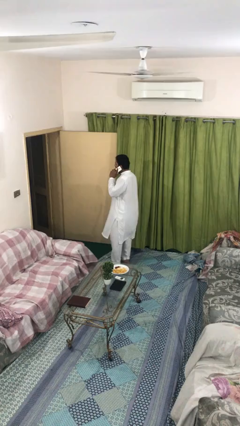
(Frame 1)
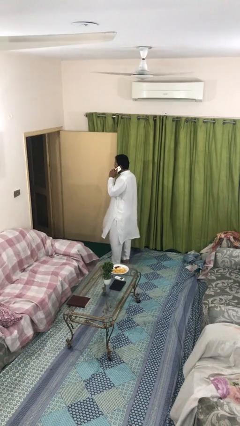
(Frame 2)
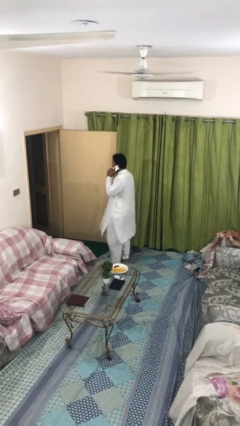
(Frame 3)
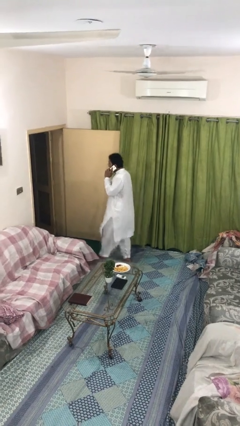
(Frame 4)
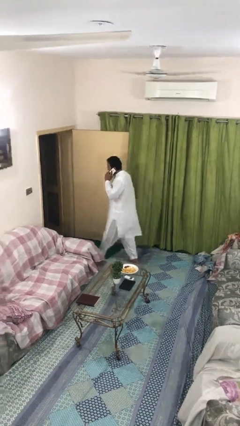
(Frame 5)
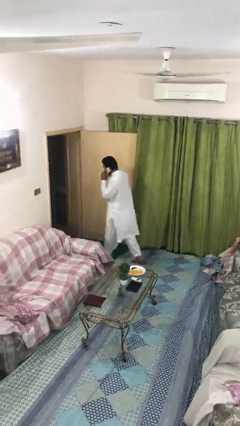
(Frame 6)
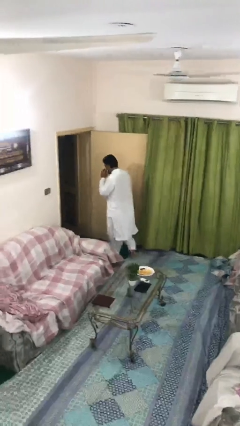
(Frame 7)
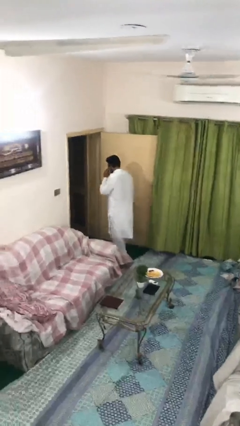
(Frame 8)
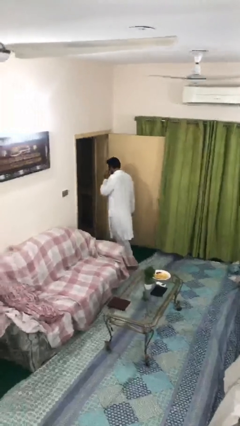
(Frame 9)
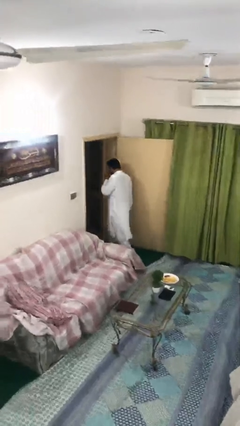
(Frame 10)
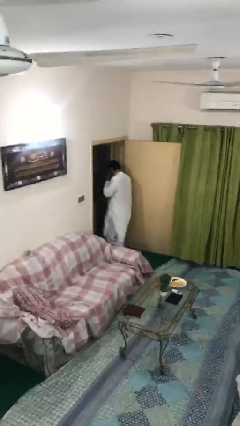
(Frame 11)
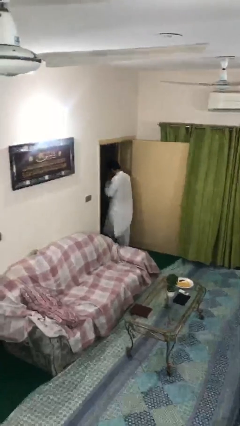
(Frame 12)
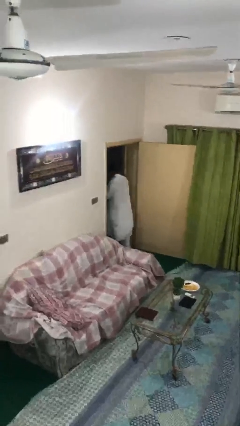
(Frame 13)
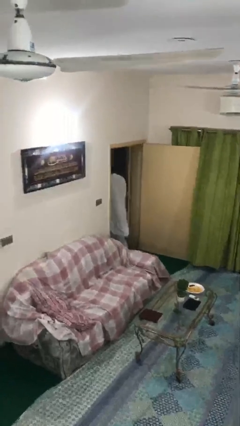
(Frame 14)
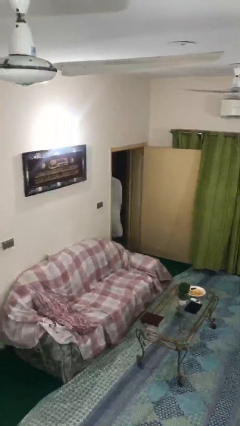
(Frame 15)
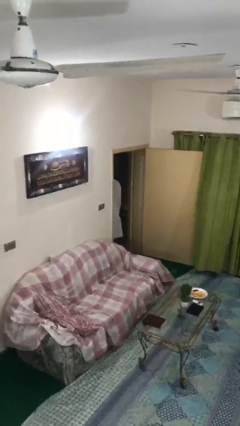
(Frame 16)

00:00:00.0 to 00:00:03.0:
person exits scene through structure

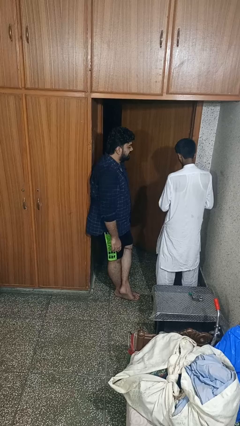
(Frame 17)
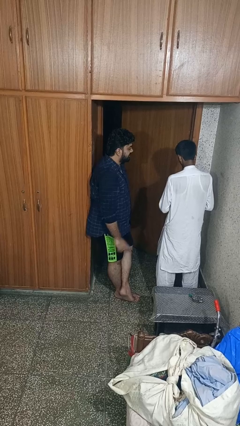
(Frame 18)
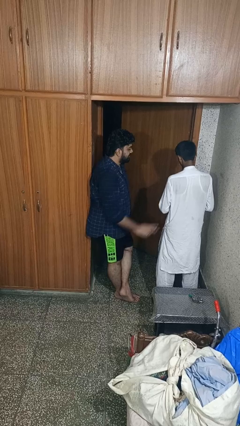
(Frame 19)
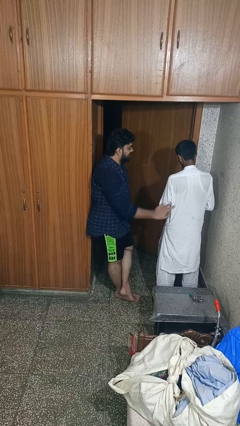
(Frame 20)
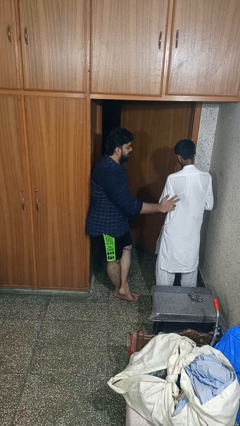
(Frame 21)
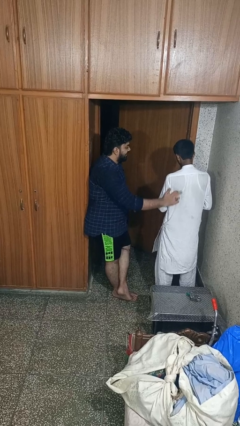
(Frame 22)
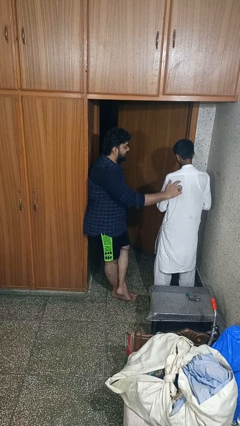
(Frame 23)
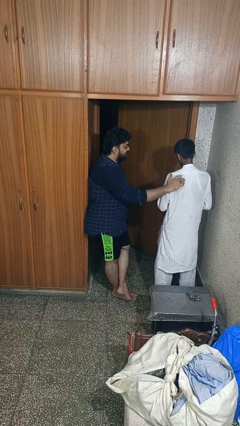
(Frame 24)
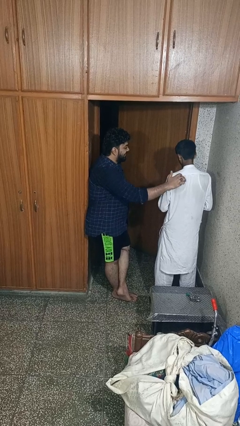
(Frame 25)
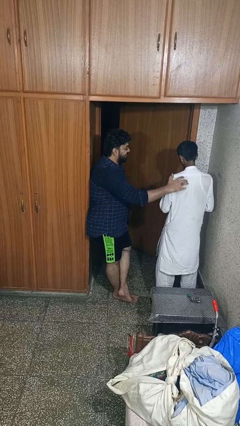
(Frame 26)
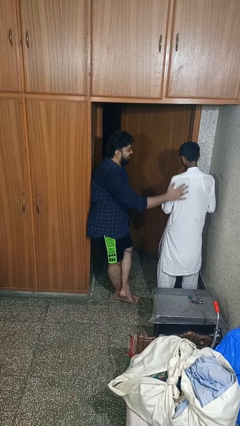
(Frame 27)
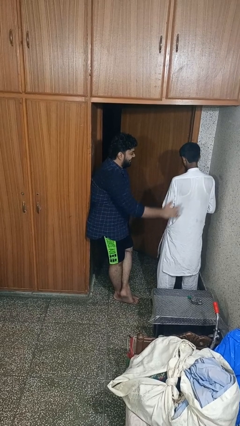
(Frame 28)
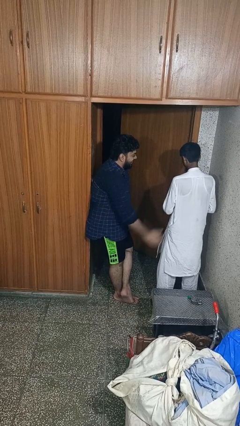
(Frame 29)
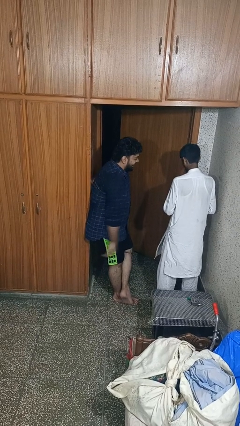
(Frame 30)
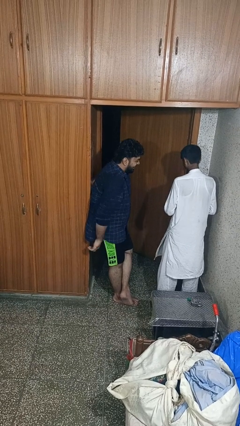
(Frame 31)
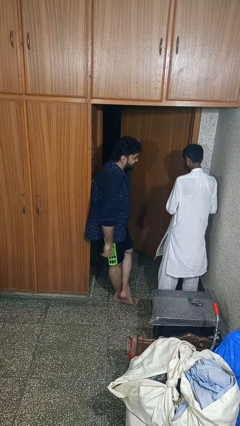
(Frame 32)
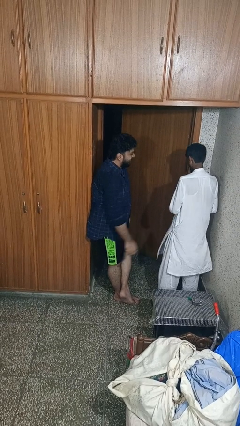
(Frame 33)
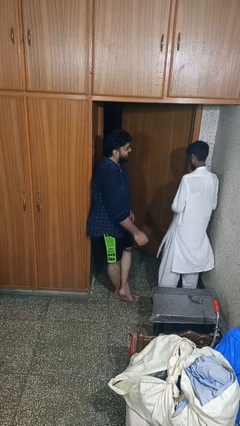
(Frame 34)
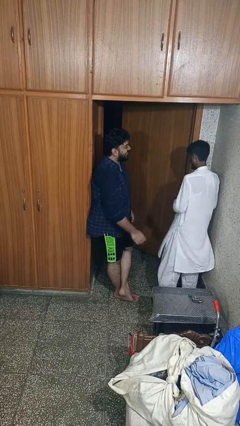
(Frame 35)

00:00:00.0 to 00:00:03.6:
person touches back of person

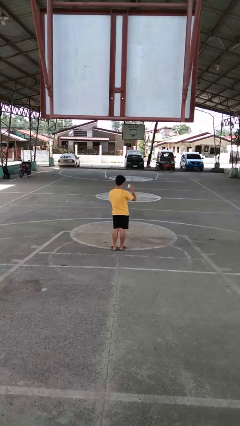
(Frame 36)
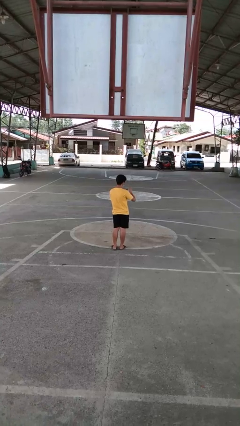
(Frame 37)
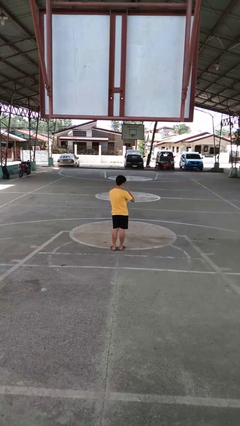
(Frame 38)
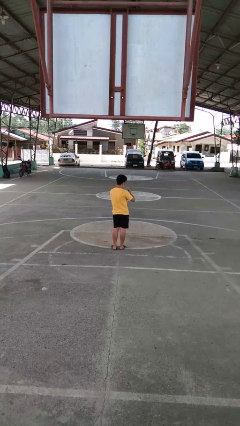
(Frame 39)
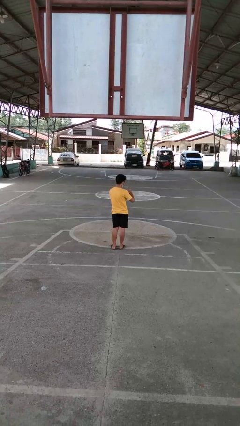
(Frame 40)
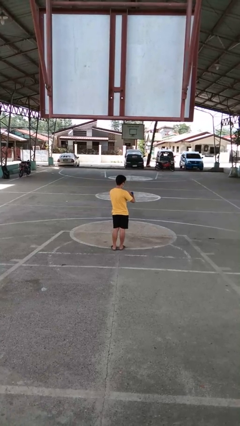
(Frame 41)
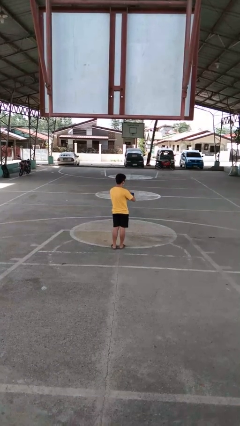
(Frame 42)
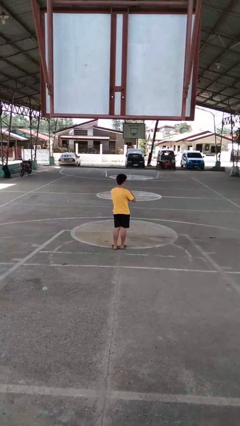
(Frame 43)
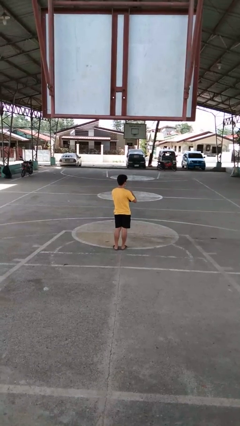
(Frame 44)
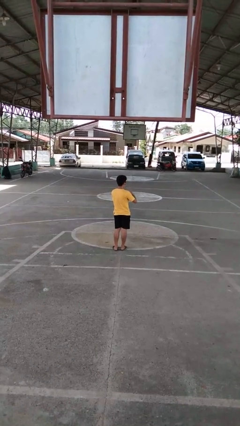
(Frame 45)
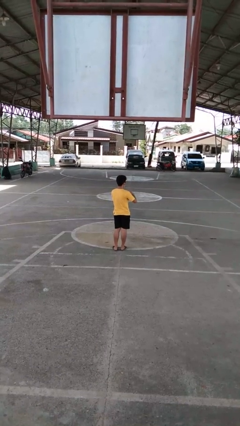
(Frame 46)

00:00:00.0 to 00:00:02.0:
person puts object into purse

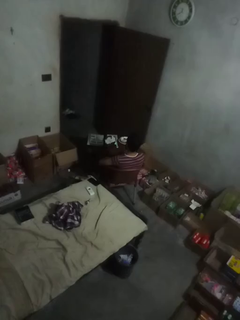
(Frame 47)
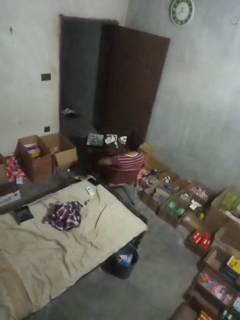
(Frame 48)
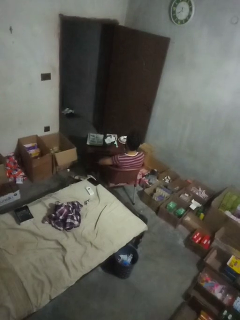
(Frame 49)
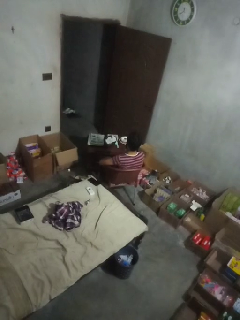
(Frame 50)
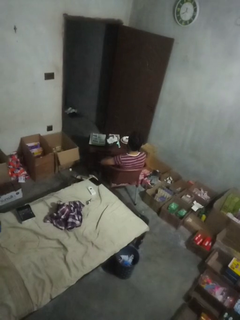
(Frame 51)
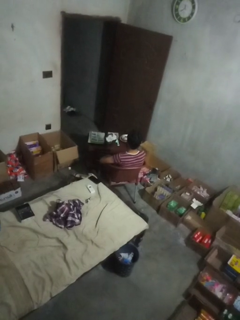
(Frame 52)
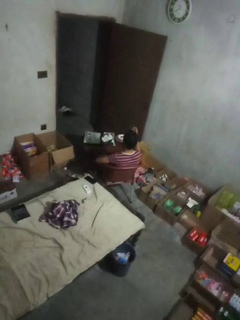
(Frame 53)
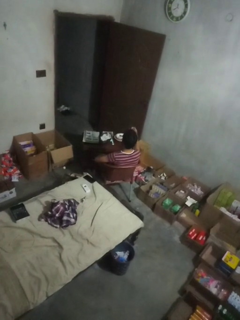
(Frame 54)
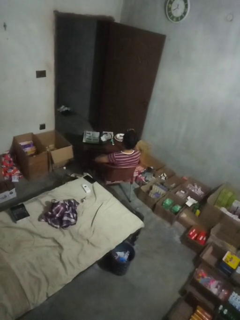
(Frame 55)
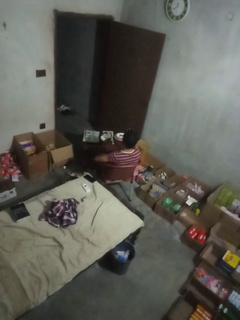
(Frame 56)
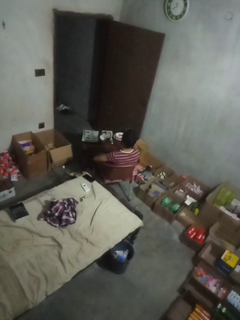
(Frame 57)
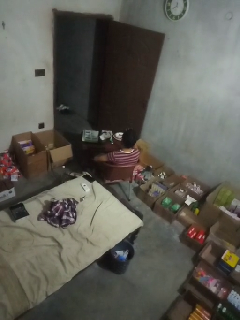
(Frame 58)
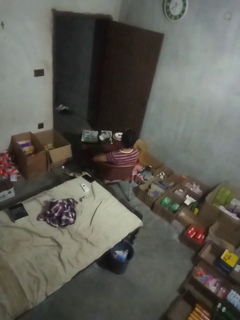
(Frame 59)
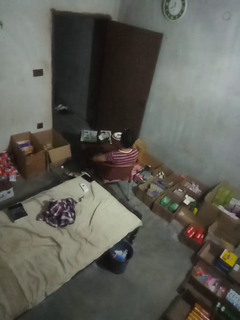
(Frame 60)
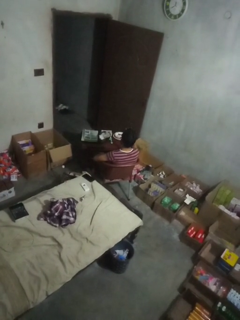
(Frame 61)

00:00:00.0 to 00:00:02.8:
person picks up object from table

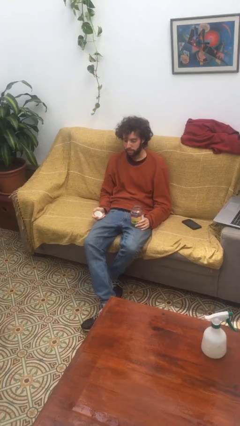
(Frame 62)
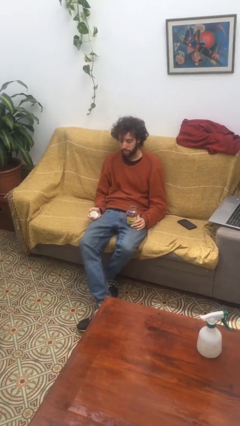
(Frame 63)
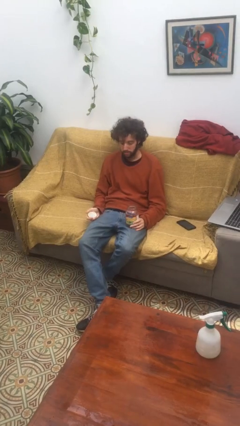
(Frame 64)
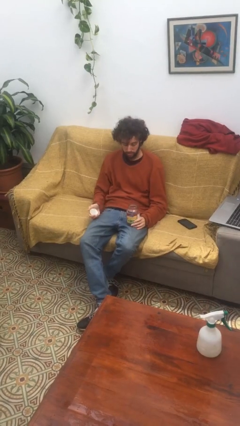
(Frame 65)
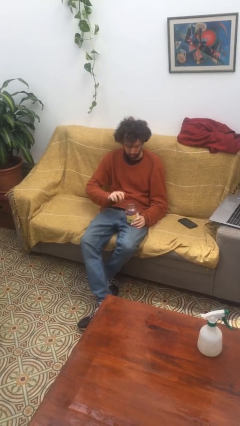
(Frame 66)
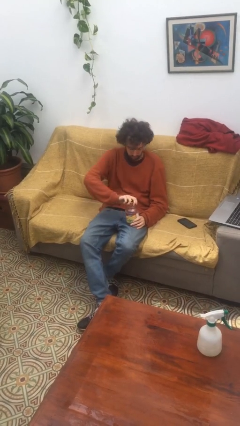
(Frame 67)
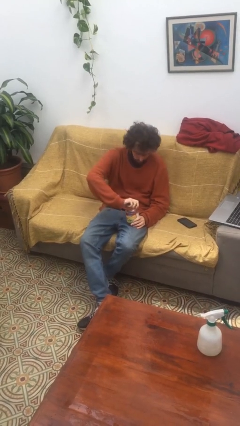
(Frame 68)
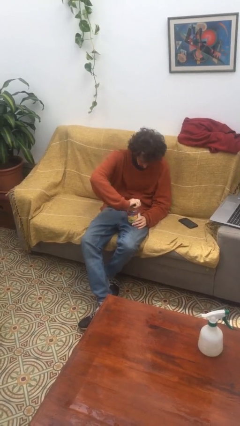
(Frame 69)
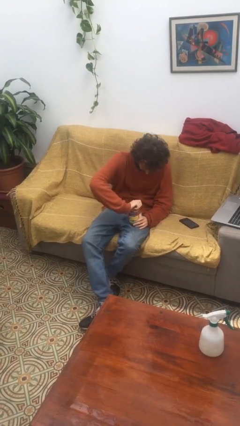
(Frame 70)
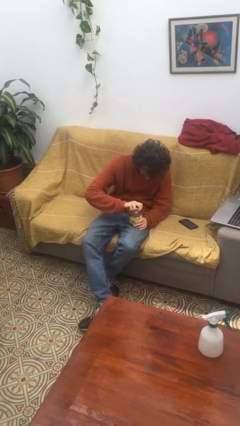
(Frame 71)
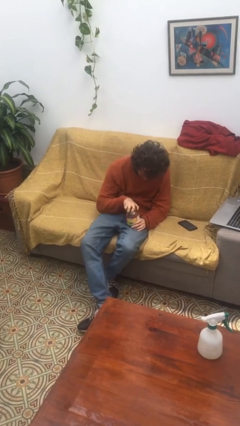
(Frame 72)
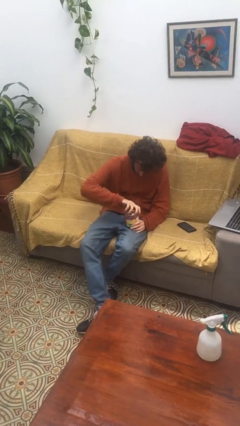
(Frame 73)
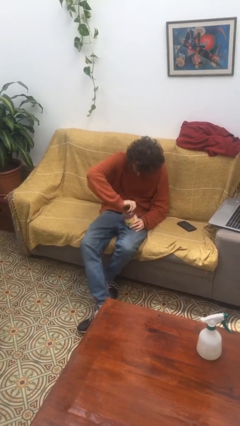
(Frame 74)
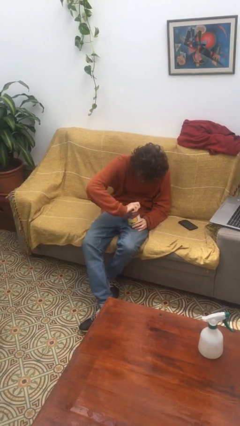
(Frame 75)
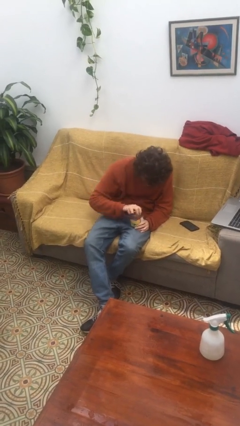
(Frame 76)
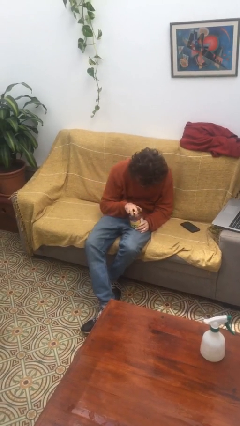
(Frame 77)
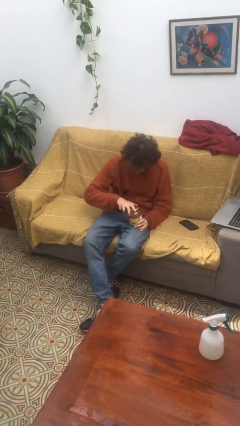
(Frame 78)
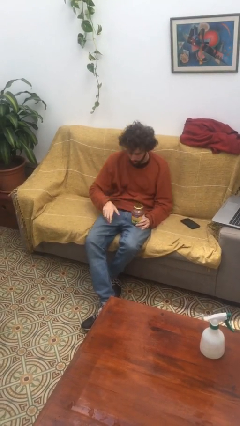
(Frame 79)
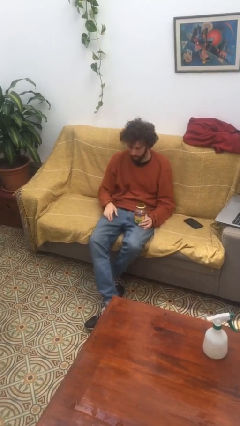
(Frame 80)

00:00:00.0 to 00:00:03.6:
person closes jar

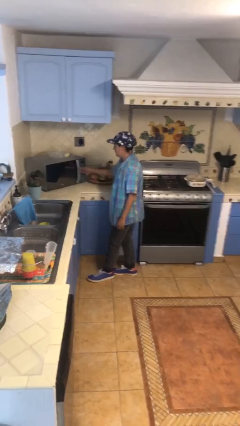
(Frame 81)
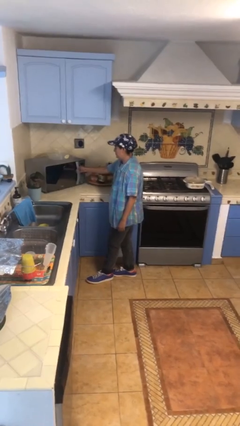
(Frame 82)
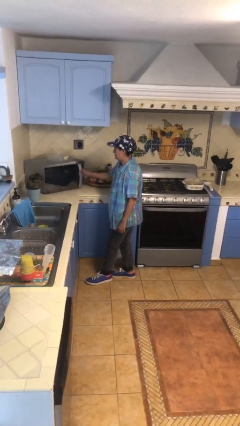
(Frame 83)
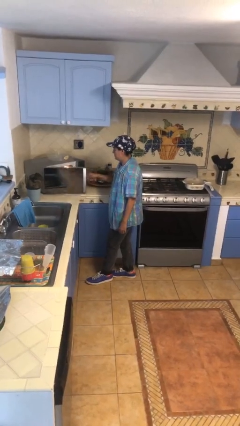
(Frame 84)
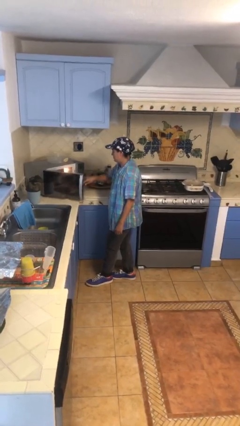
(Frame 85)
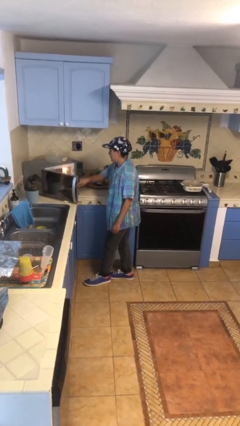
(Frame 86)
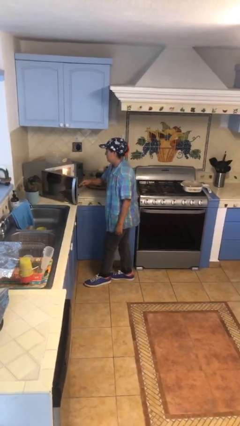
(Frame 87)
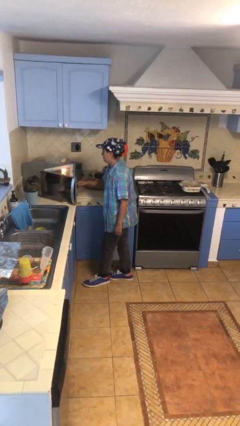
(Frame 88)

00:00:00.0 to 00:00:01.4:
person opens microwave

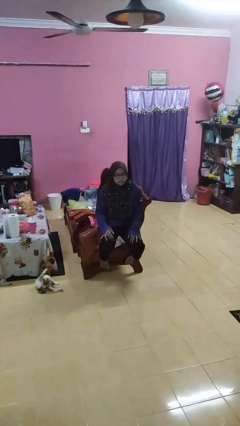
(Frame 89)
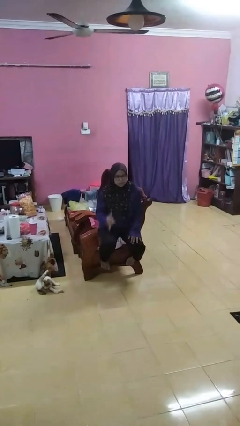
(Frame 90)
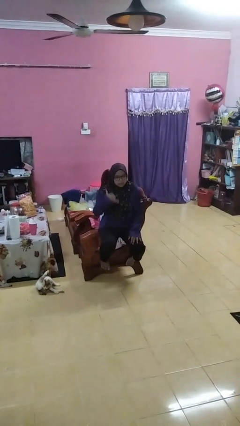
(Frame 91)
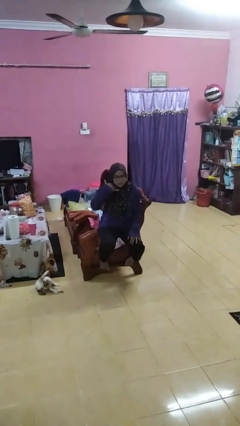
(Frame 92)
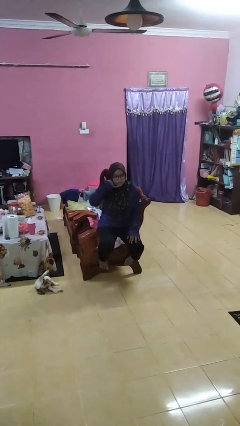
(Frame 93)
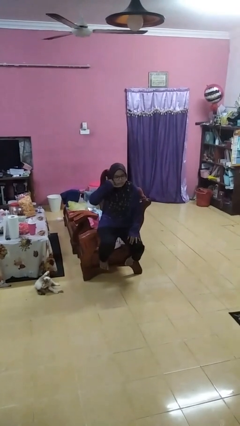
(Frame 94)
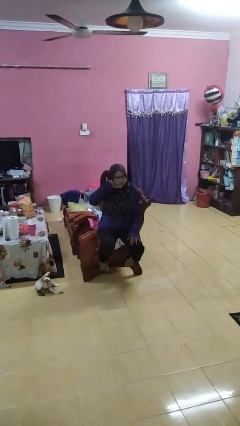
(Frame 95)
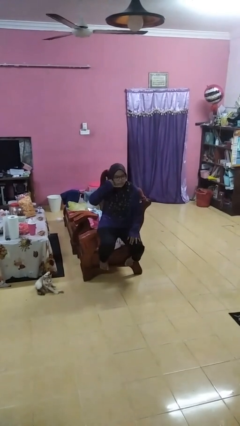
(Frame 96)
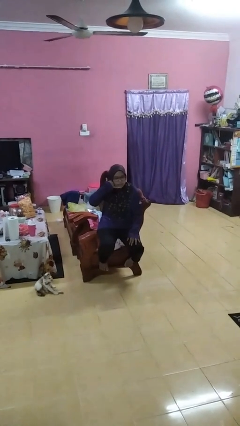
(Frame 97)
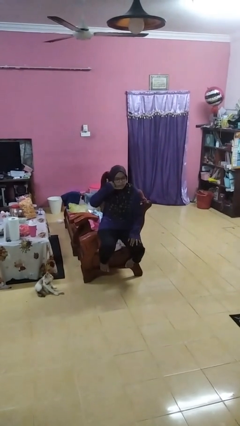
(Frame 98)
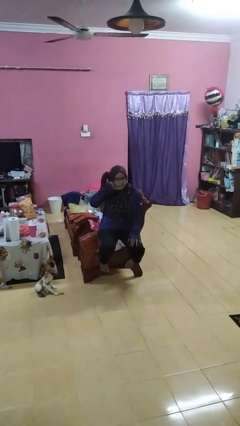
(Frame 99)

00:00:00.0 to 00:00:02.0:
person gestures call me
